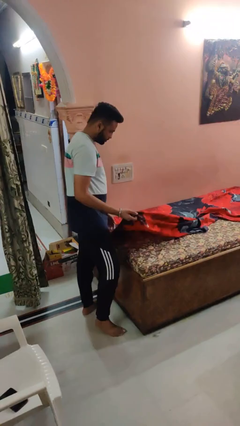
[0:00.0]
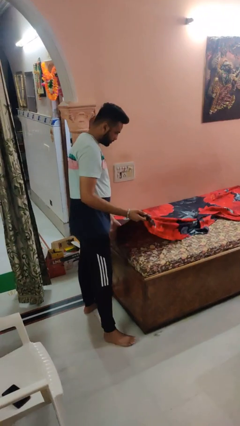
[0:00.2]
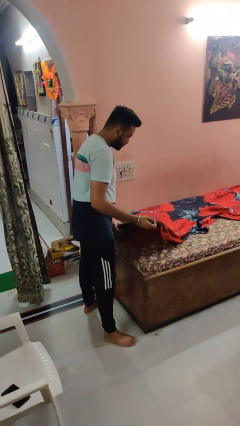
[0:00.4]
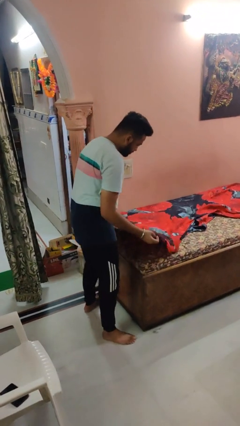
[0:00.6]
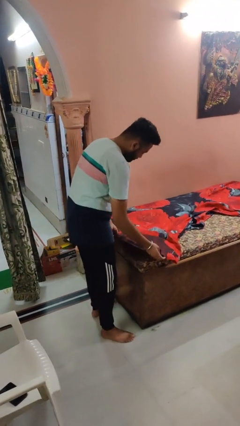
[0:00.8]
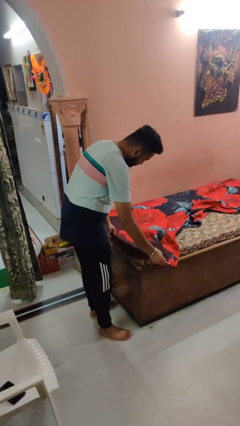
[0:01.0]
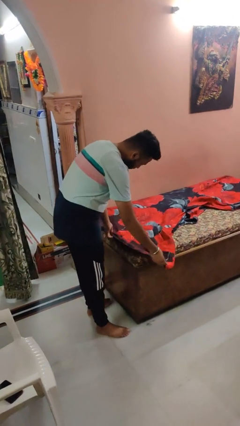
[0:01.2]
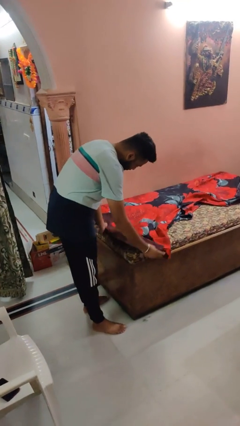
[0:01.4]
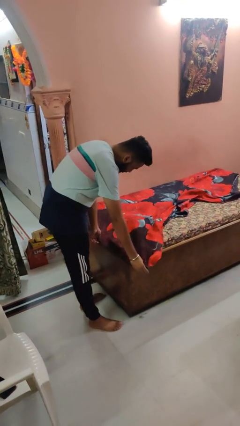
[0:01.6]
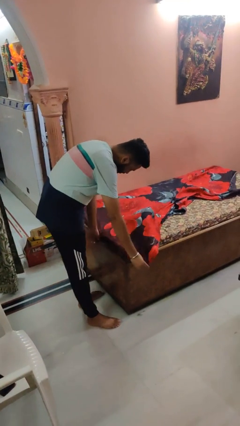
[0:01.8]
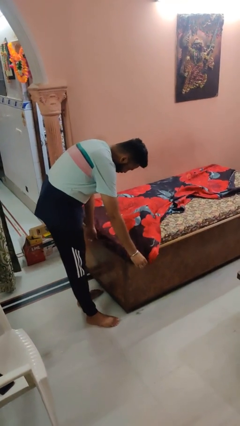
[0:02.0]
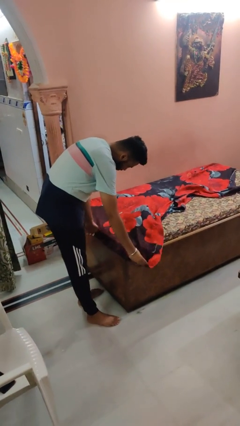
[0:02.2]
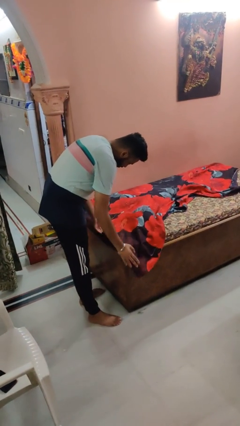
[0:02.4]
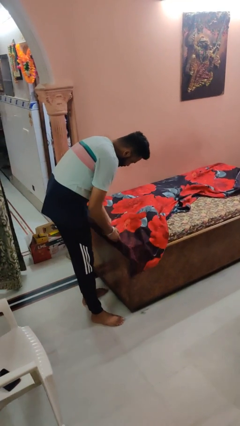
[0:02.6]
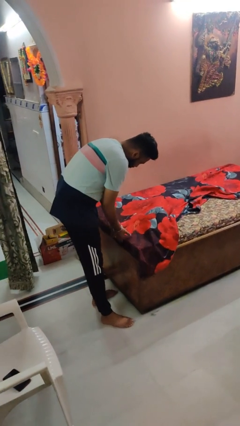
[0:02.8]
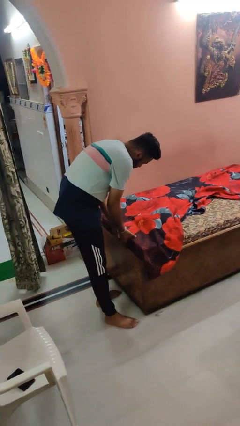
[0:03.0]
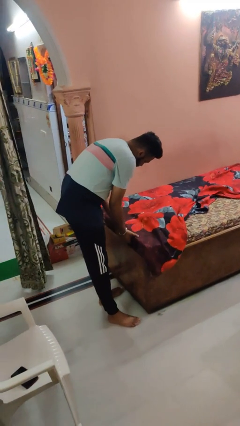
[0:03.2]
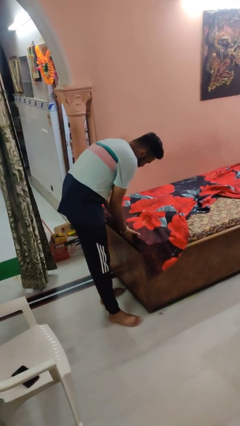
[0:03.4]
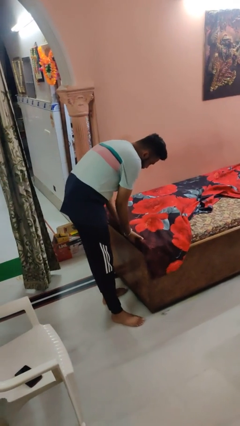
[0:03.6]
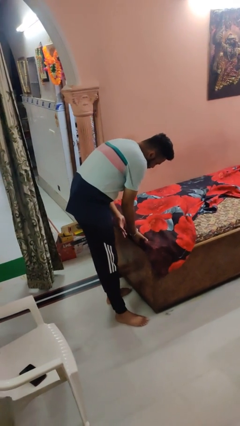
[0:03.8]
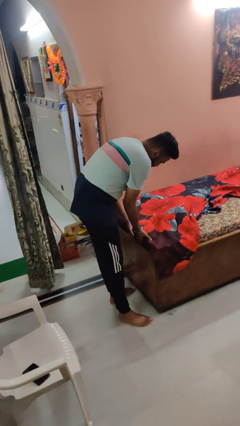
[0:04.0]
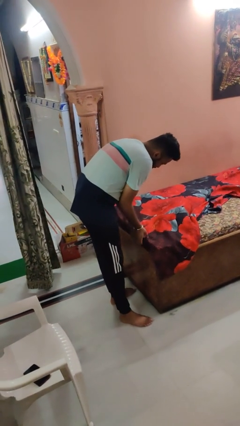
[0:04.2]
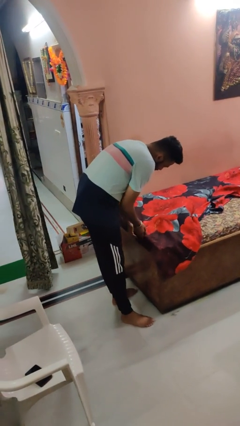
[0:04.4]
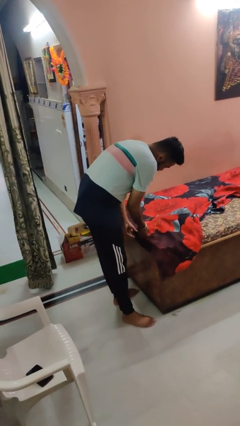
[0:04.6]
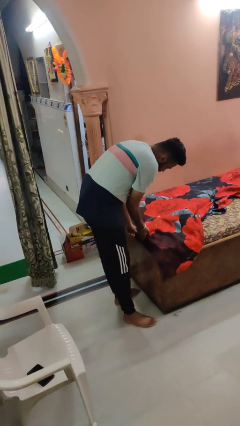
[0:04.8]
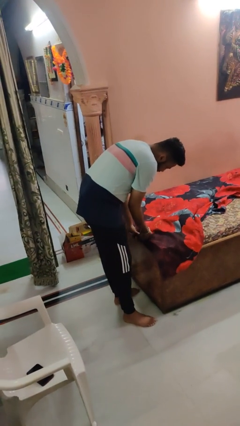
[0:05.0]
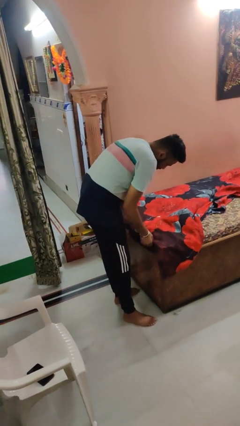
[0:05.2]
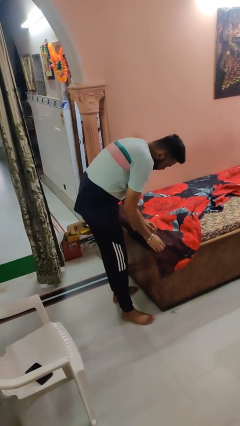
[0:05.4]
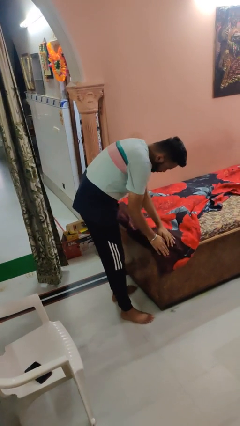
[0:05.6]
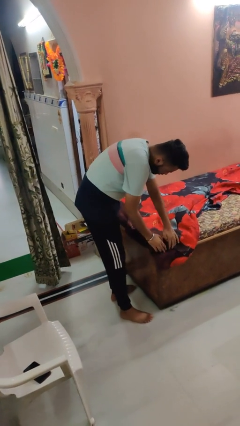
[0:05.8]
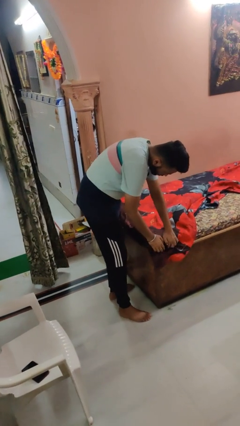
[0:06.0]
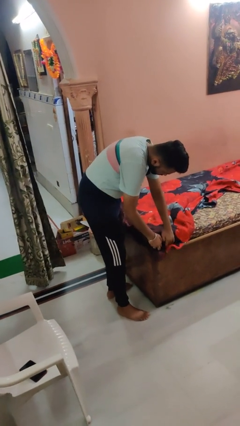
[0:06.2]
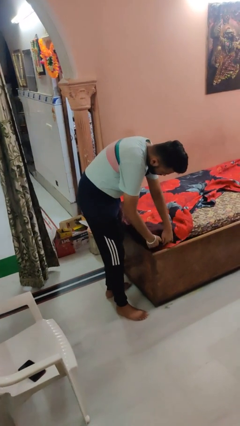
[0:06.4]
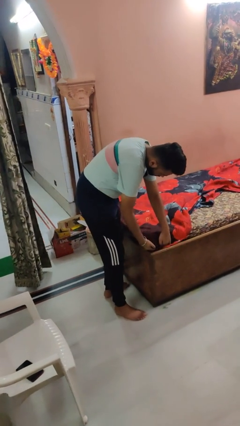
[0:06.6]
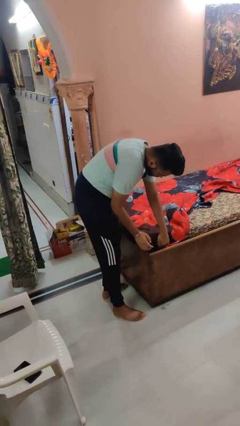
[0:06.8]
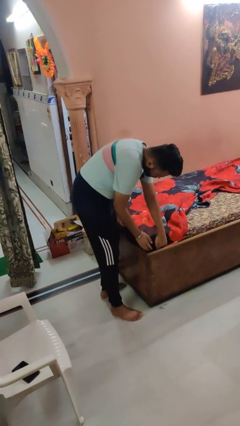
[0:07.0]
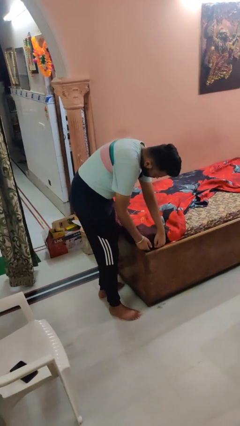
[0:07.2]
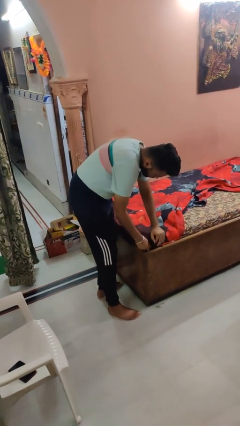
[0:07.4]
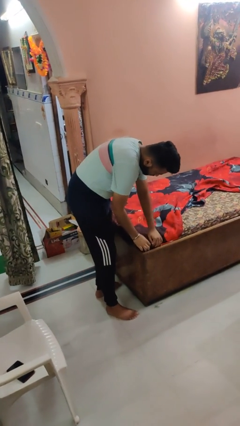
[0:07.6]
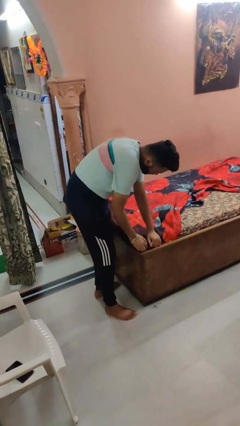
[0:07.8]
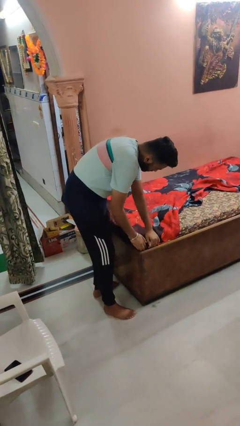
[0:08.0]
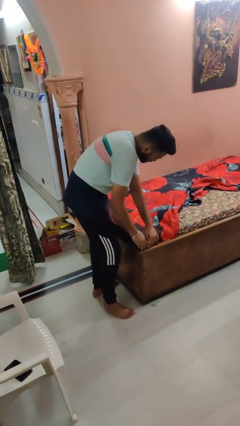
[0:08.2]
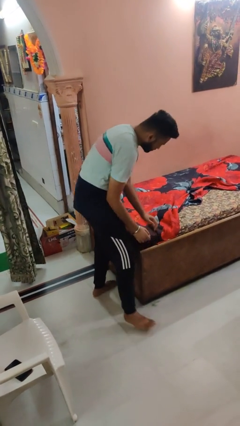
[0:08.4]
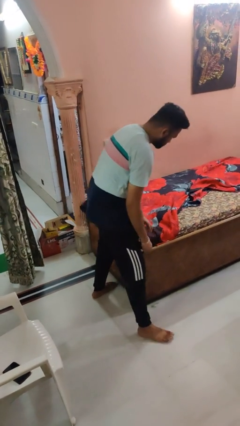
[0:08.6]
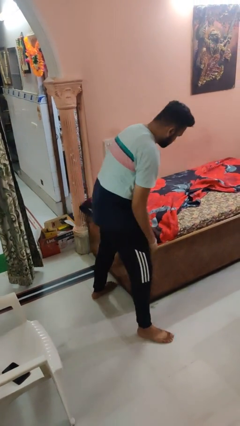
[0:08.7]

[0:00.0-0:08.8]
person makes bed

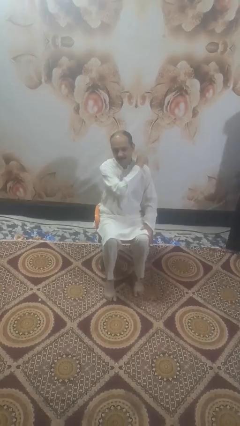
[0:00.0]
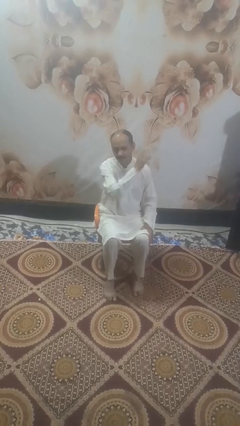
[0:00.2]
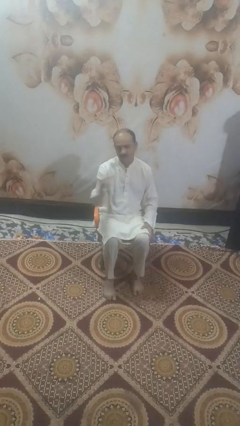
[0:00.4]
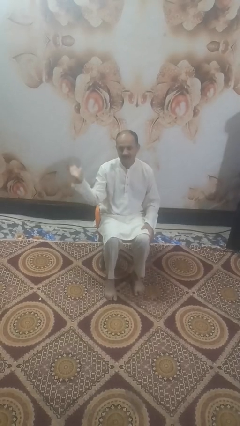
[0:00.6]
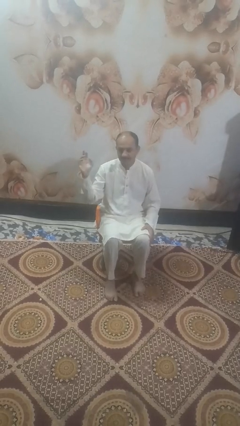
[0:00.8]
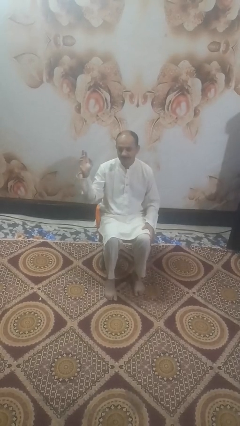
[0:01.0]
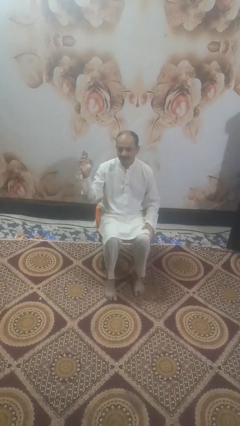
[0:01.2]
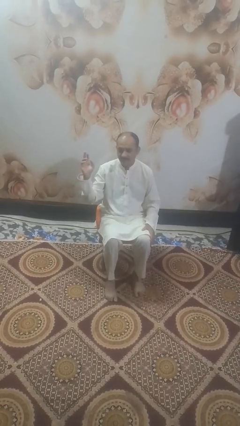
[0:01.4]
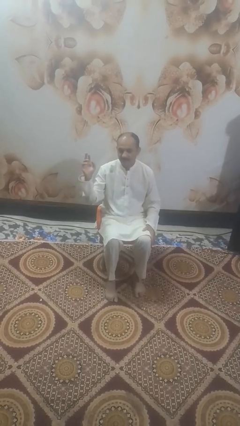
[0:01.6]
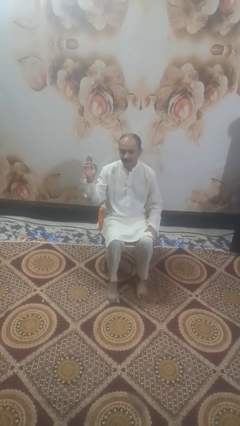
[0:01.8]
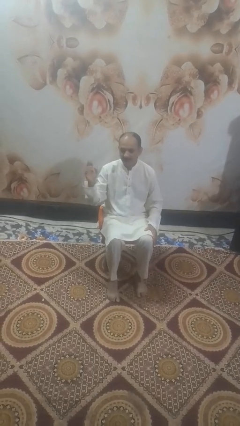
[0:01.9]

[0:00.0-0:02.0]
person gestures swipe right

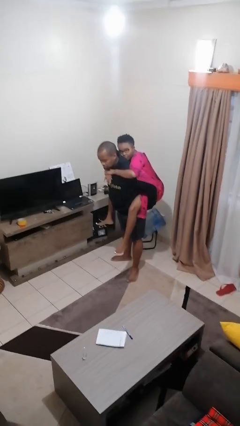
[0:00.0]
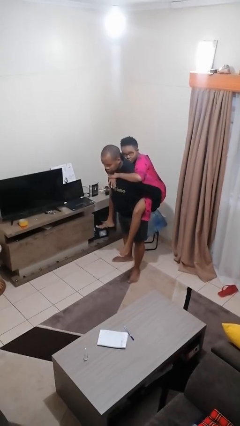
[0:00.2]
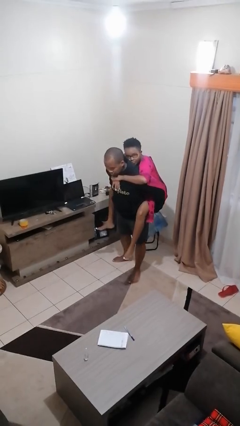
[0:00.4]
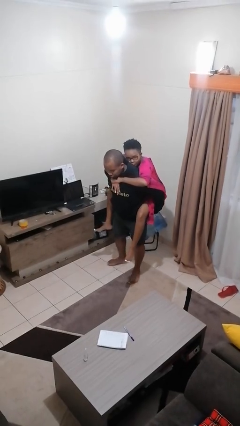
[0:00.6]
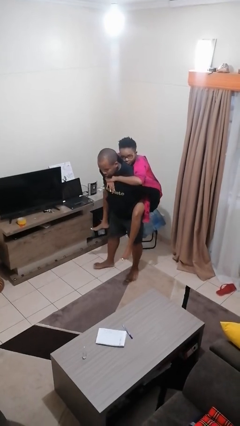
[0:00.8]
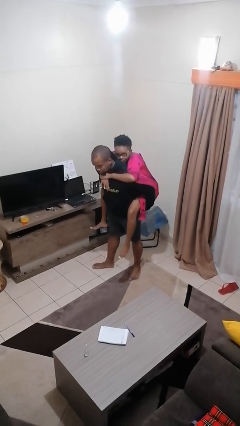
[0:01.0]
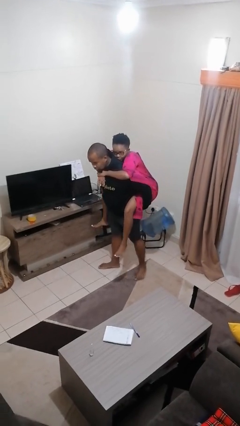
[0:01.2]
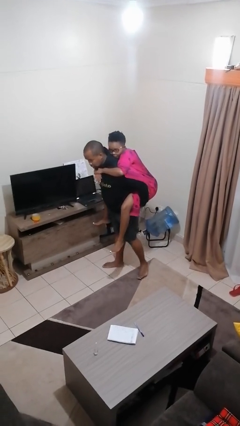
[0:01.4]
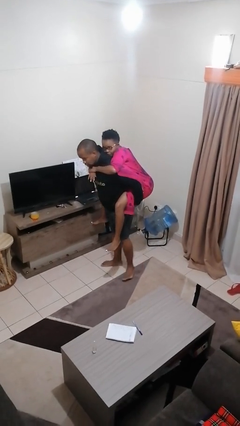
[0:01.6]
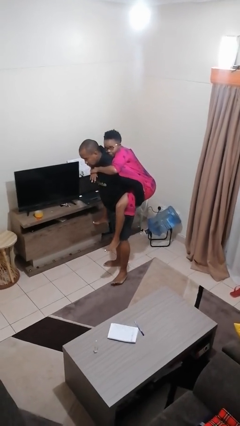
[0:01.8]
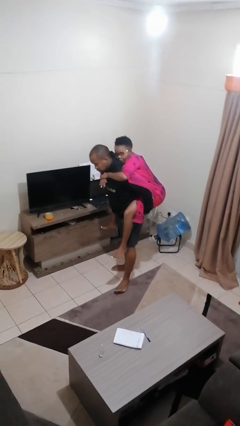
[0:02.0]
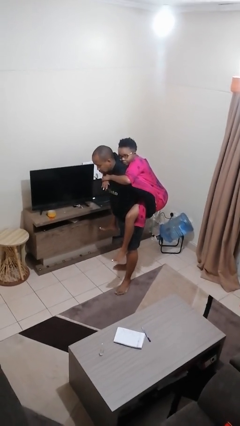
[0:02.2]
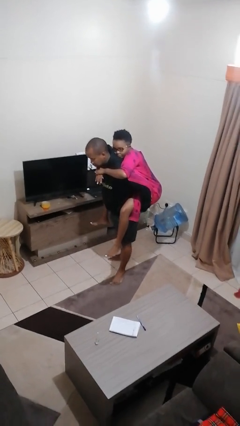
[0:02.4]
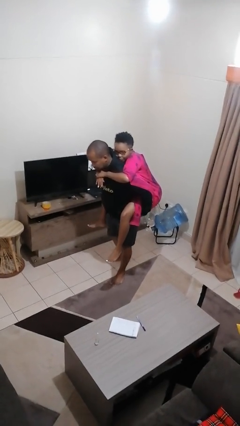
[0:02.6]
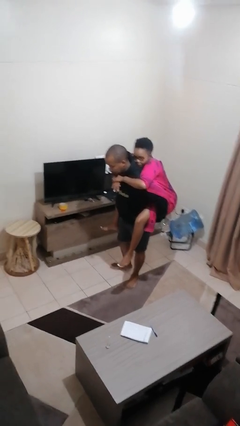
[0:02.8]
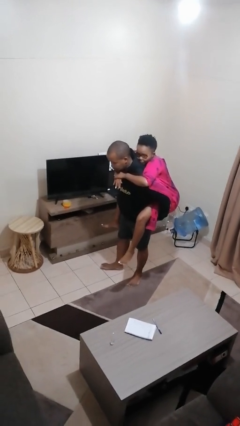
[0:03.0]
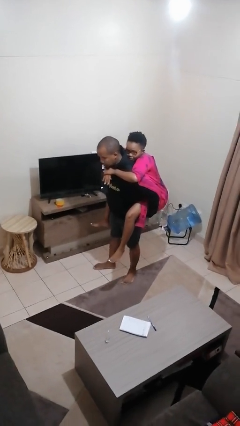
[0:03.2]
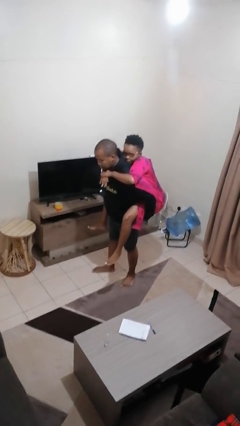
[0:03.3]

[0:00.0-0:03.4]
person carries person on back

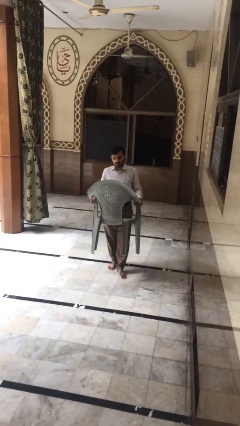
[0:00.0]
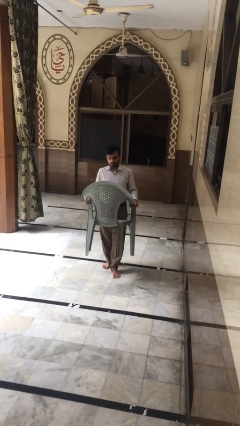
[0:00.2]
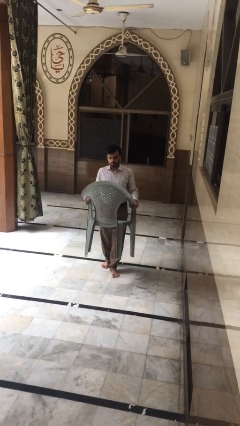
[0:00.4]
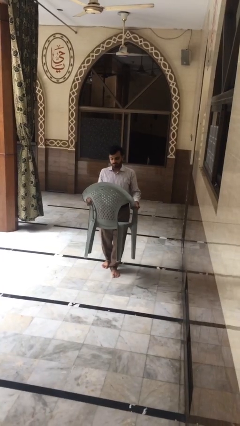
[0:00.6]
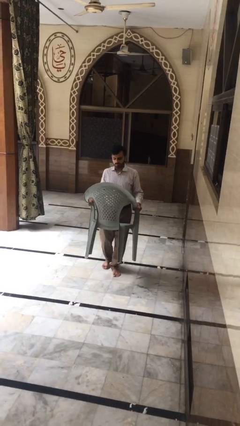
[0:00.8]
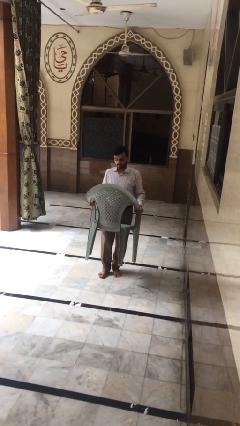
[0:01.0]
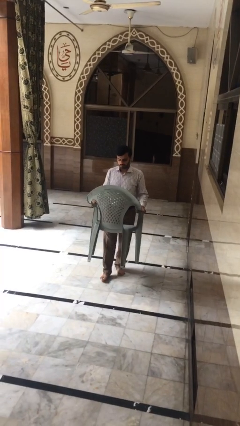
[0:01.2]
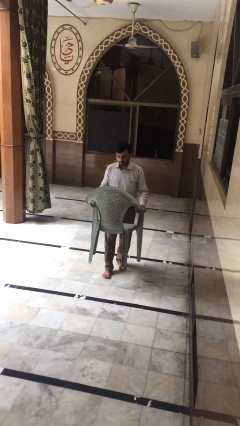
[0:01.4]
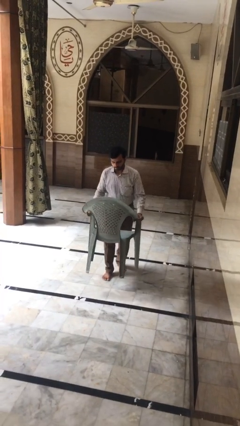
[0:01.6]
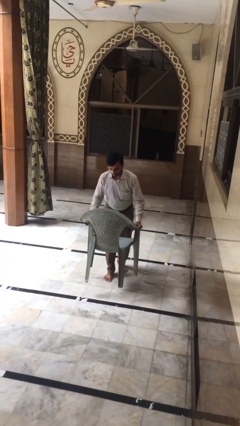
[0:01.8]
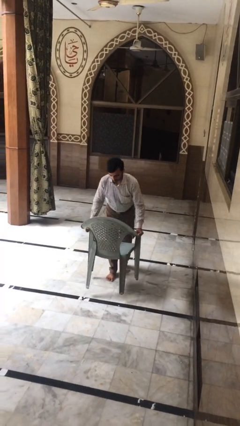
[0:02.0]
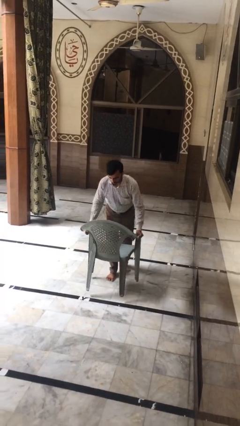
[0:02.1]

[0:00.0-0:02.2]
person puts down object on floor

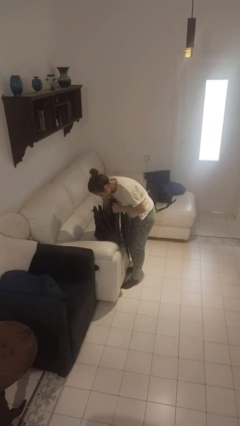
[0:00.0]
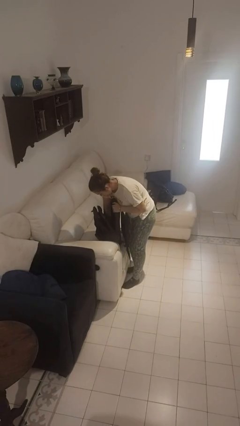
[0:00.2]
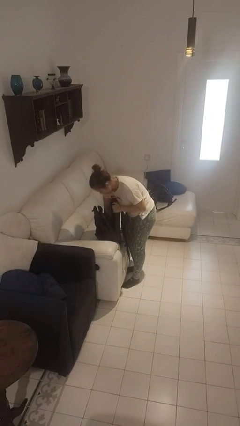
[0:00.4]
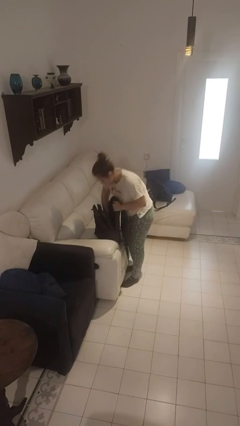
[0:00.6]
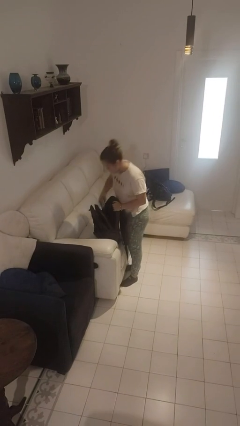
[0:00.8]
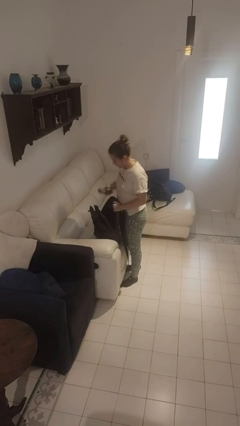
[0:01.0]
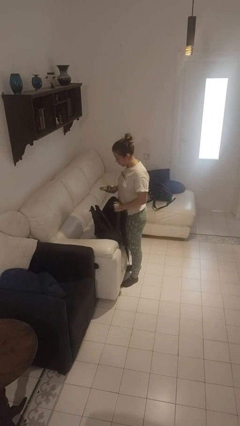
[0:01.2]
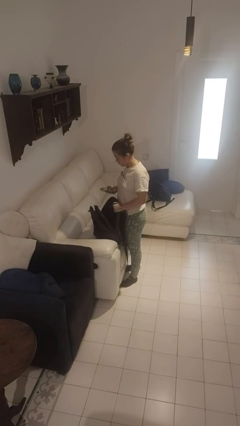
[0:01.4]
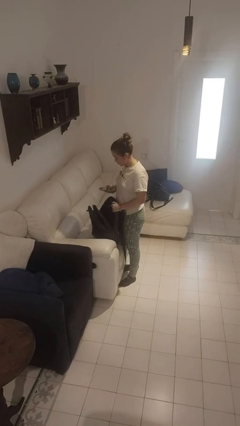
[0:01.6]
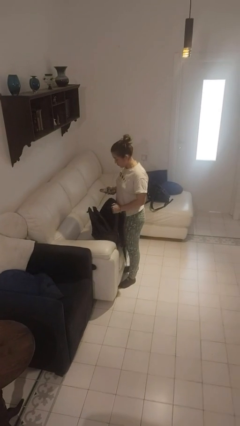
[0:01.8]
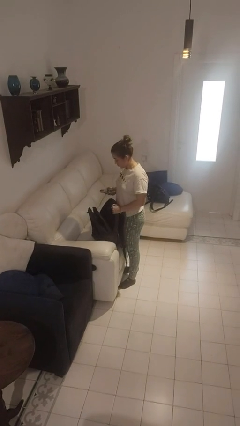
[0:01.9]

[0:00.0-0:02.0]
person takes object from backpack
